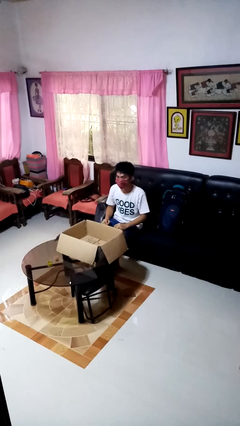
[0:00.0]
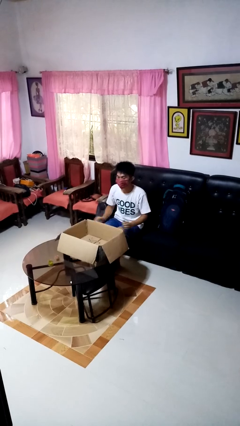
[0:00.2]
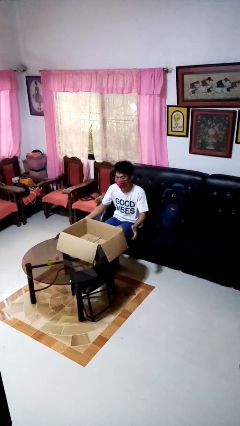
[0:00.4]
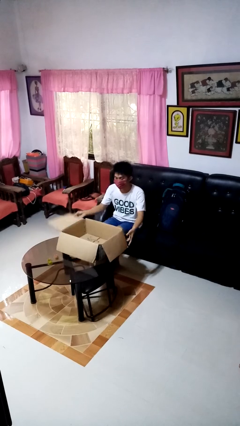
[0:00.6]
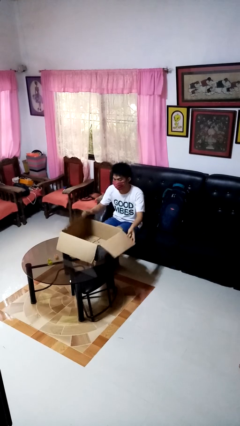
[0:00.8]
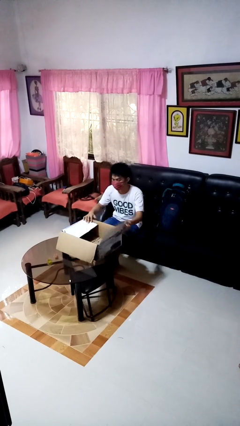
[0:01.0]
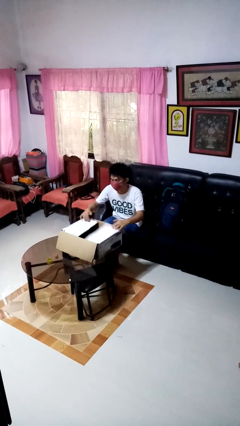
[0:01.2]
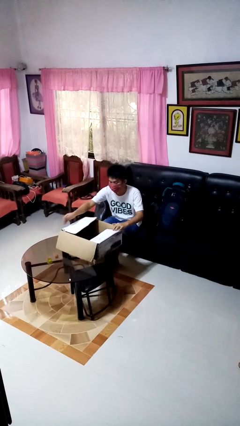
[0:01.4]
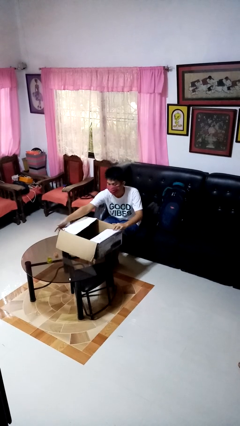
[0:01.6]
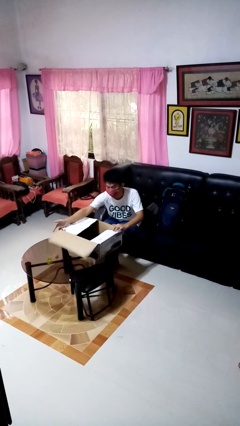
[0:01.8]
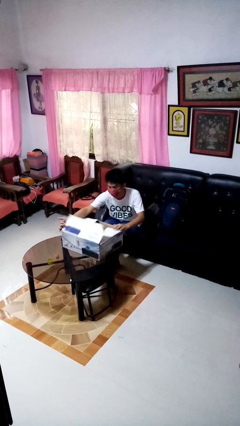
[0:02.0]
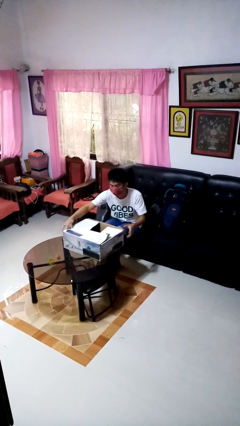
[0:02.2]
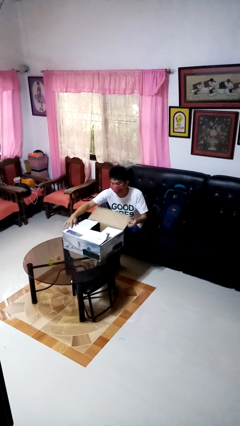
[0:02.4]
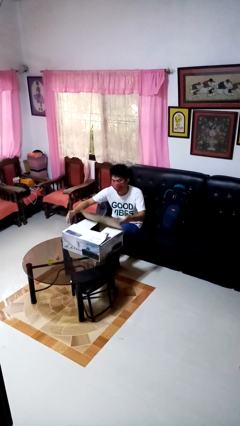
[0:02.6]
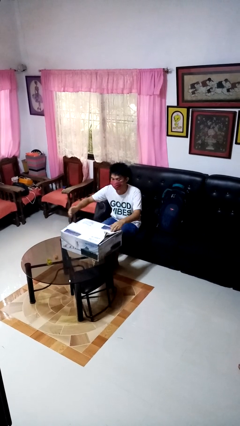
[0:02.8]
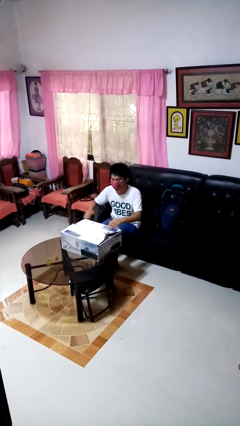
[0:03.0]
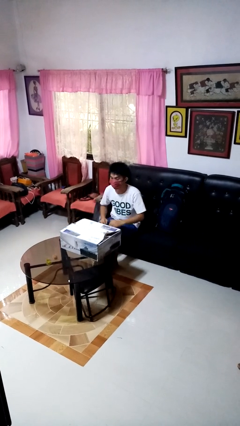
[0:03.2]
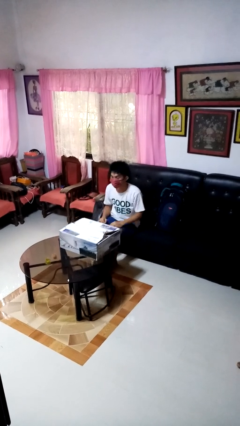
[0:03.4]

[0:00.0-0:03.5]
person closes box

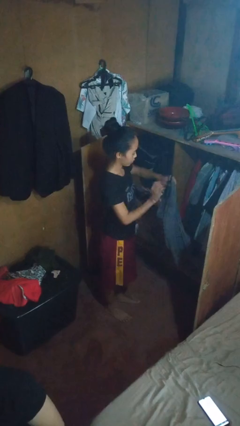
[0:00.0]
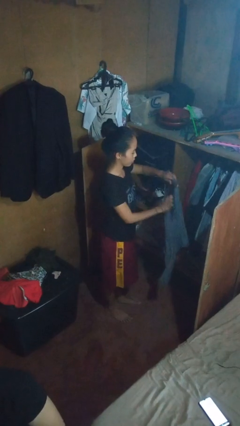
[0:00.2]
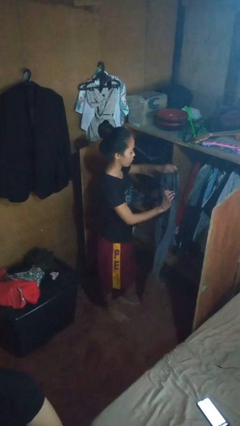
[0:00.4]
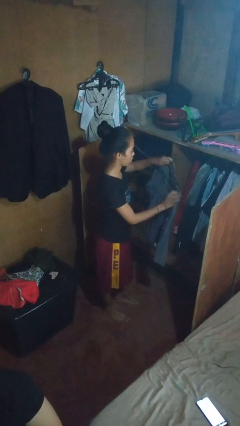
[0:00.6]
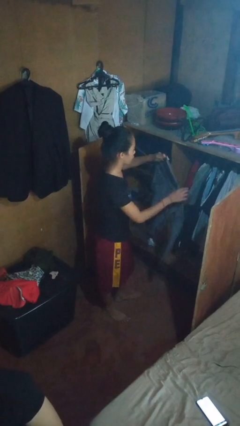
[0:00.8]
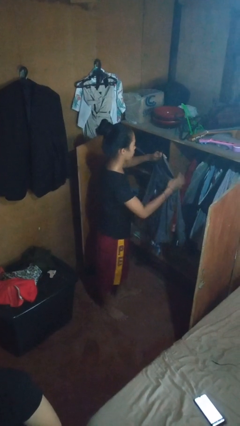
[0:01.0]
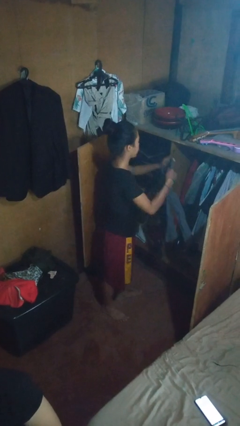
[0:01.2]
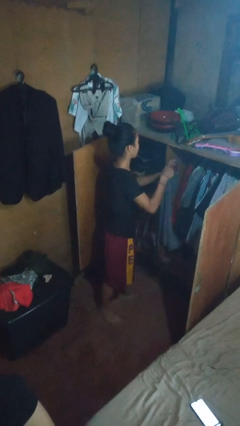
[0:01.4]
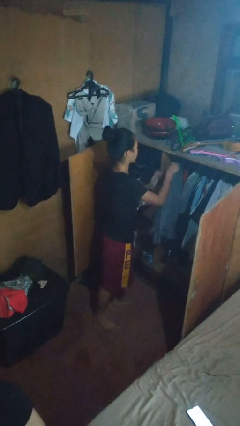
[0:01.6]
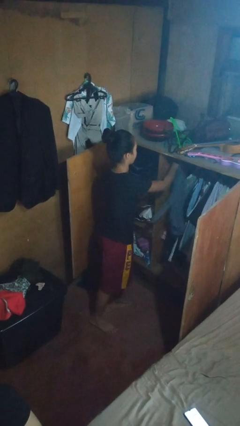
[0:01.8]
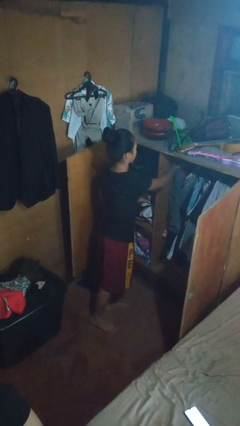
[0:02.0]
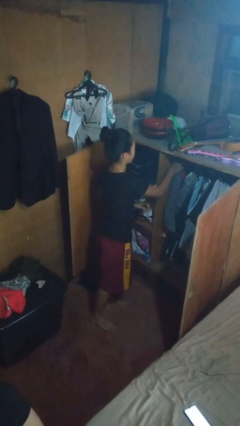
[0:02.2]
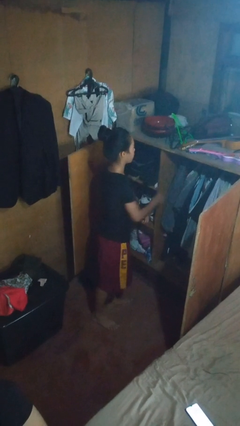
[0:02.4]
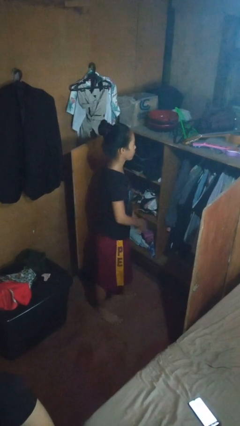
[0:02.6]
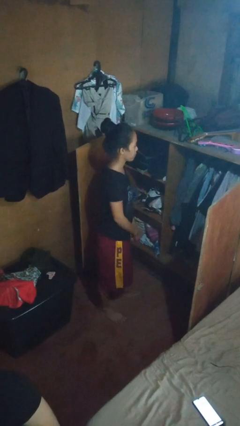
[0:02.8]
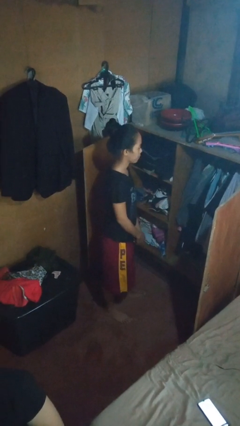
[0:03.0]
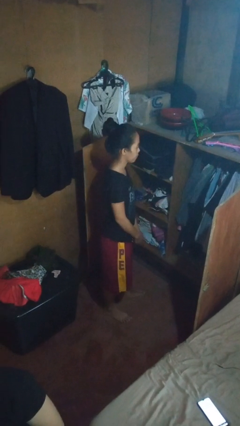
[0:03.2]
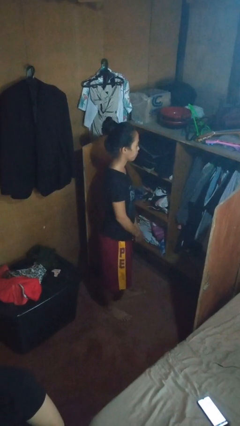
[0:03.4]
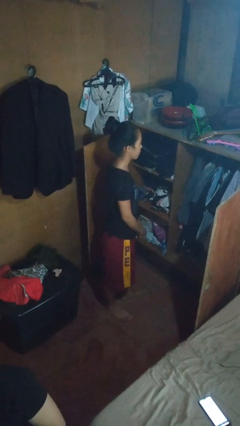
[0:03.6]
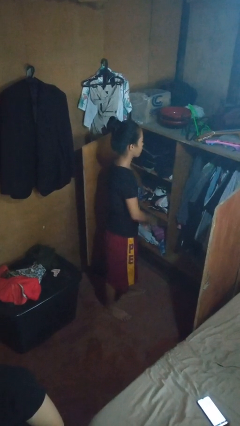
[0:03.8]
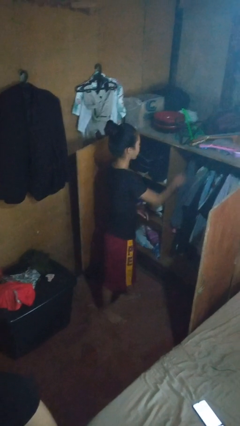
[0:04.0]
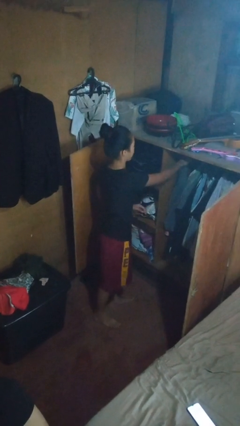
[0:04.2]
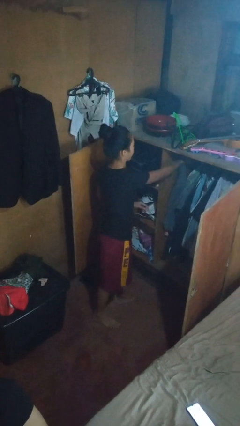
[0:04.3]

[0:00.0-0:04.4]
person puts clothes into closet

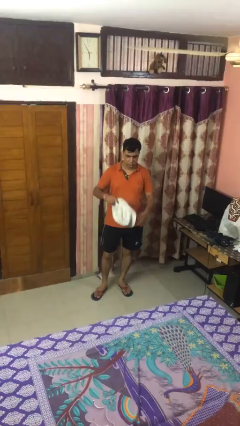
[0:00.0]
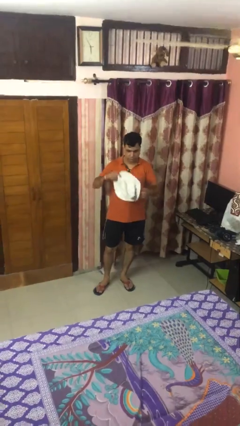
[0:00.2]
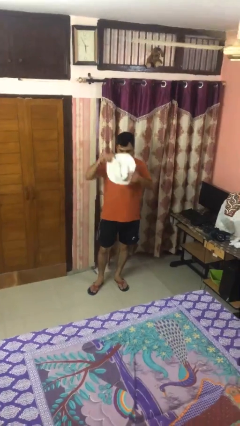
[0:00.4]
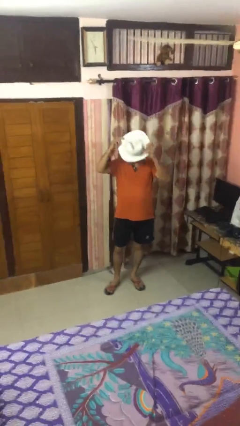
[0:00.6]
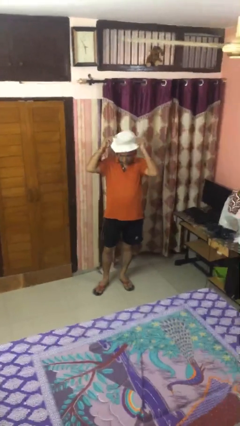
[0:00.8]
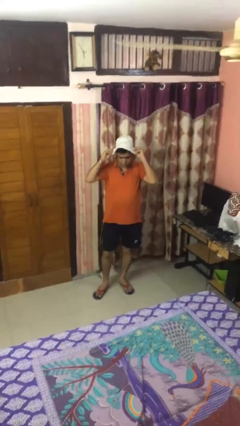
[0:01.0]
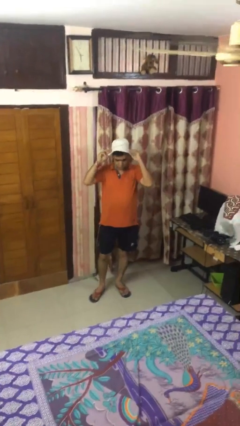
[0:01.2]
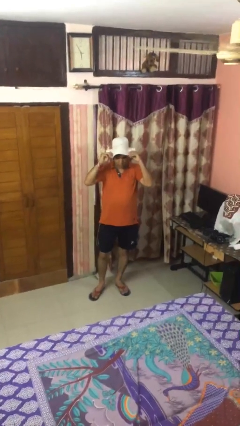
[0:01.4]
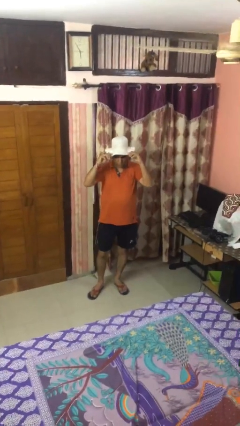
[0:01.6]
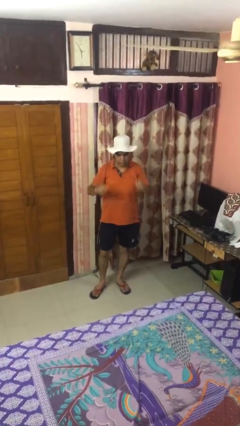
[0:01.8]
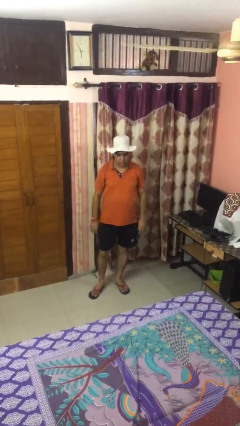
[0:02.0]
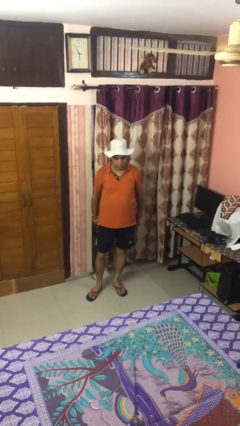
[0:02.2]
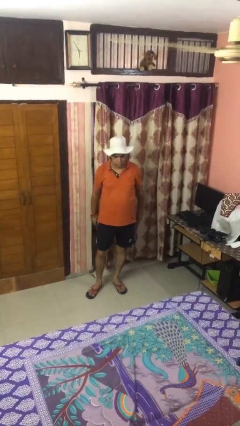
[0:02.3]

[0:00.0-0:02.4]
person puts on hat

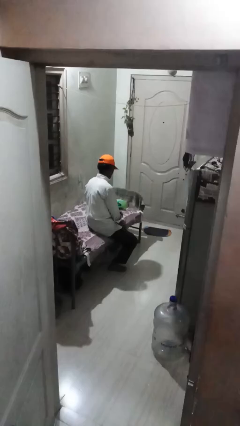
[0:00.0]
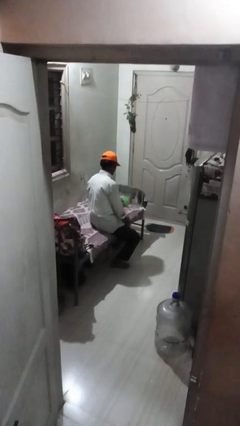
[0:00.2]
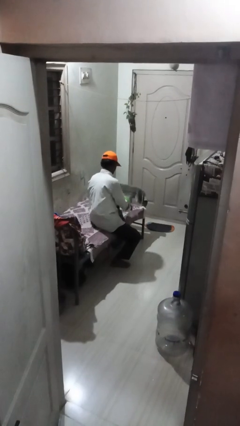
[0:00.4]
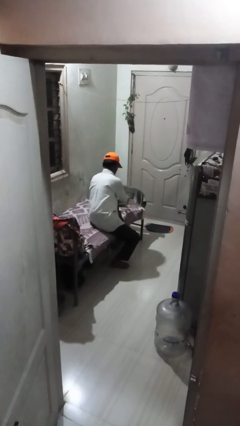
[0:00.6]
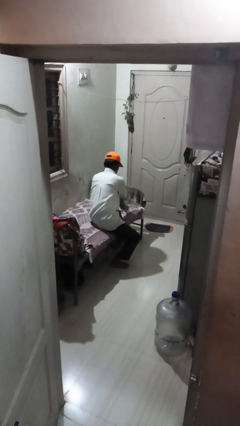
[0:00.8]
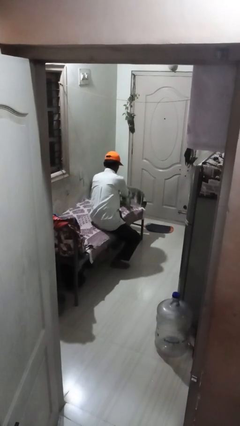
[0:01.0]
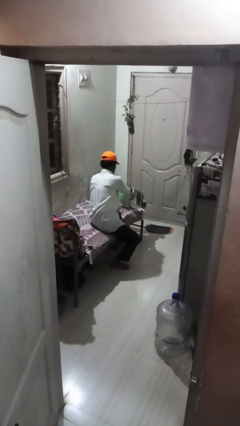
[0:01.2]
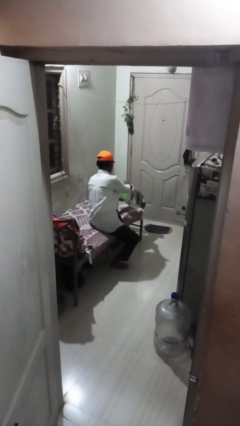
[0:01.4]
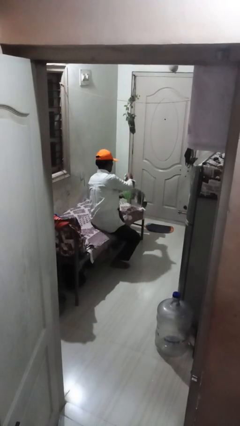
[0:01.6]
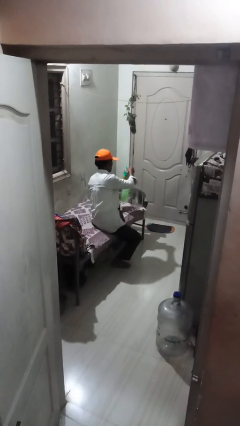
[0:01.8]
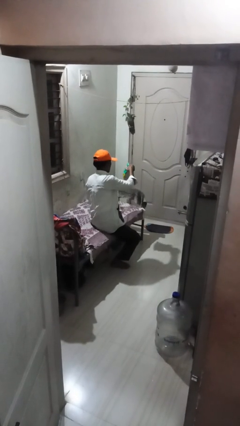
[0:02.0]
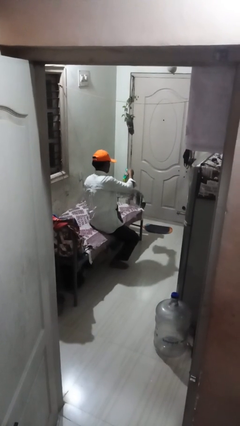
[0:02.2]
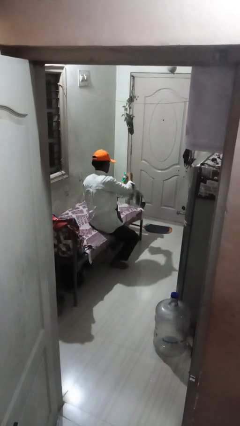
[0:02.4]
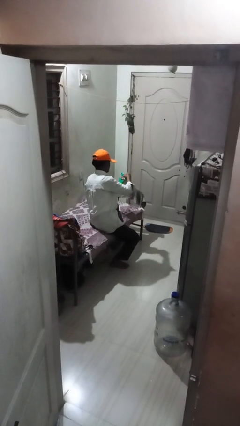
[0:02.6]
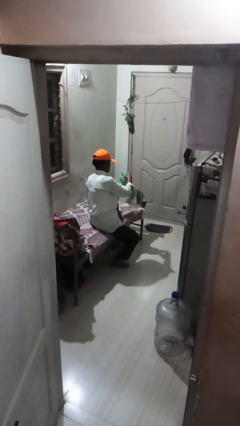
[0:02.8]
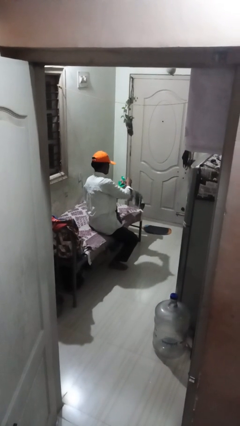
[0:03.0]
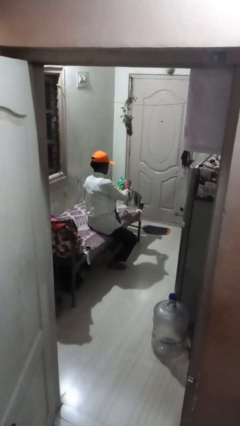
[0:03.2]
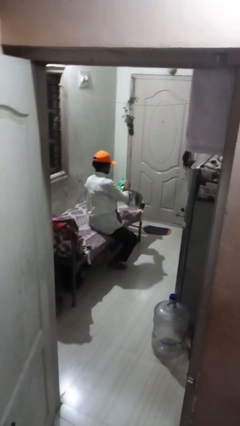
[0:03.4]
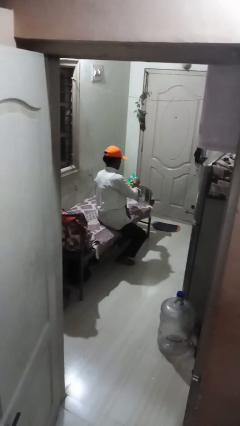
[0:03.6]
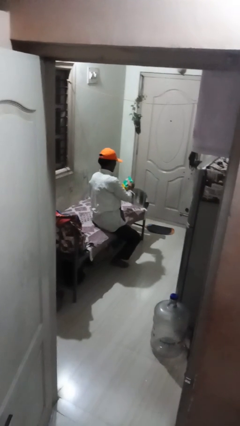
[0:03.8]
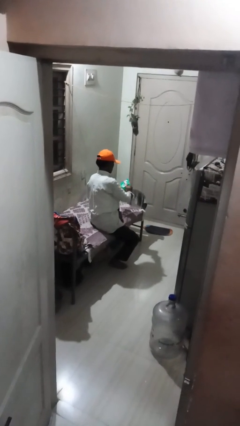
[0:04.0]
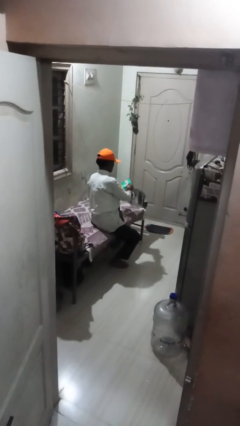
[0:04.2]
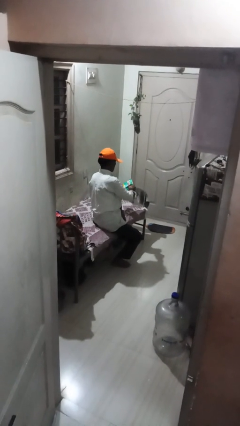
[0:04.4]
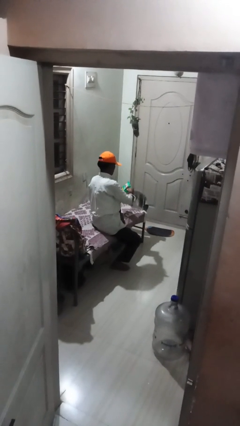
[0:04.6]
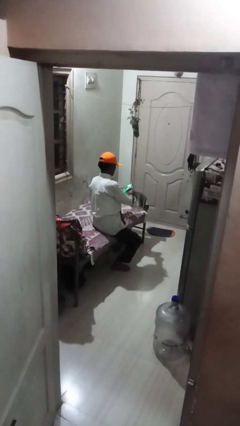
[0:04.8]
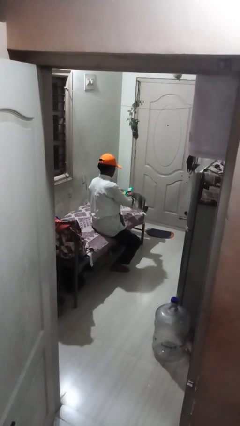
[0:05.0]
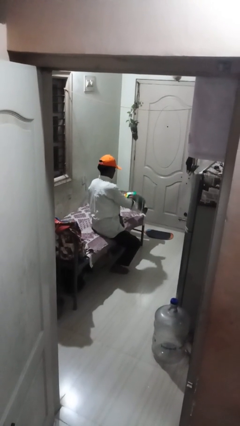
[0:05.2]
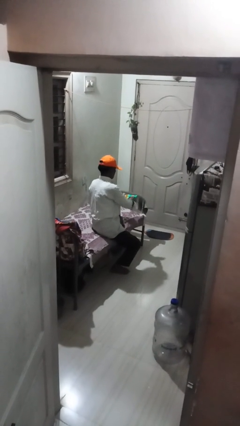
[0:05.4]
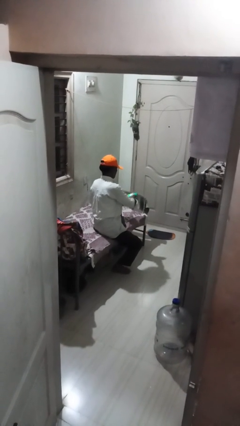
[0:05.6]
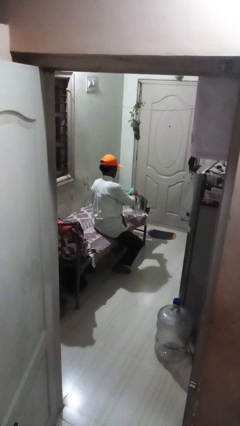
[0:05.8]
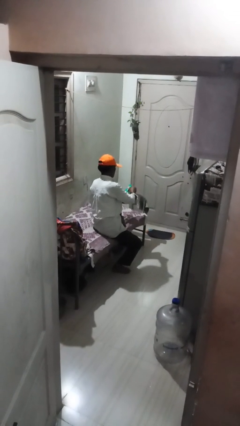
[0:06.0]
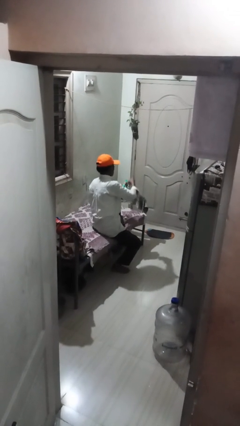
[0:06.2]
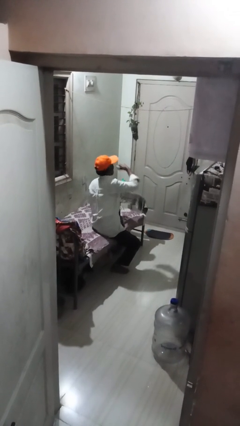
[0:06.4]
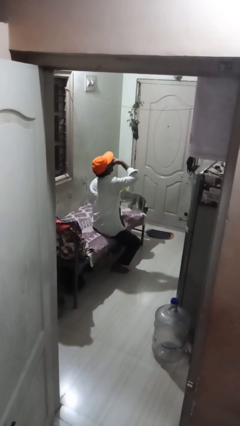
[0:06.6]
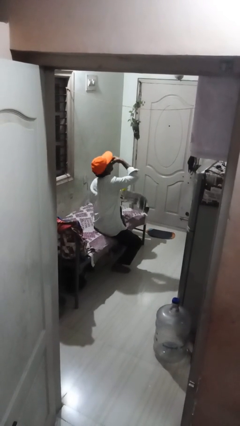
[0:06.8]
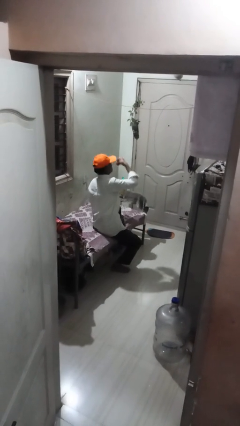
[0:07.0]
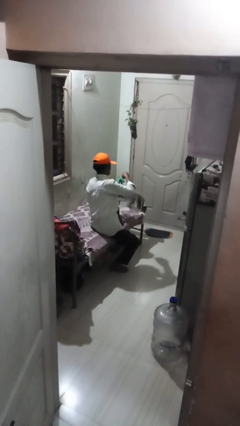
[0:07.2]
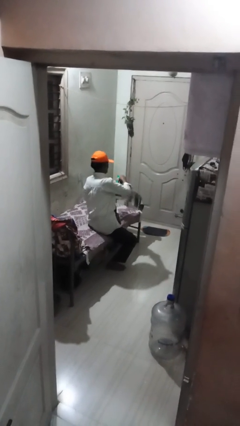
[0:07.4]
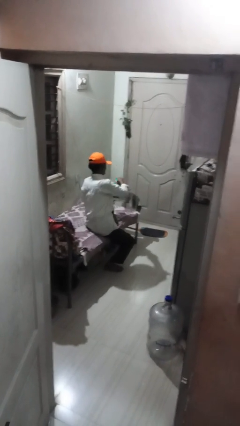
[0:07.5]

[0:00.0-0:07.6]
person eats snack from bag

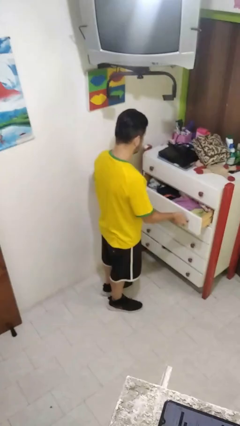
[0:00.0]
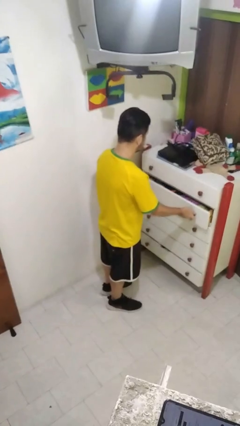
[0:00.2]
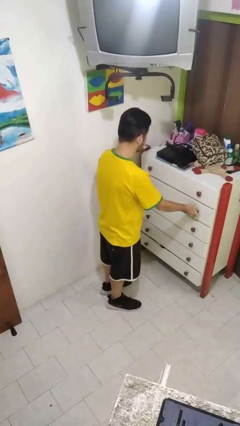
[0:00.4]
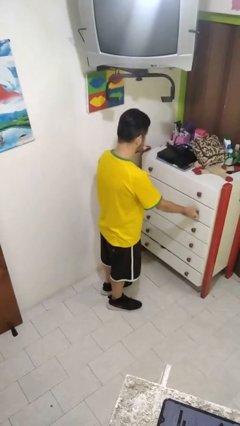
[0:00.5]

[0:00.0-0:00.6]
person closes dresser drawer
